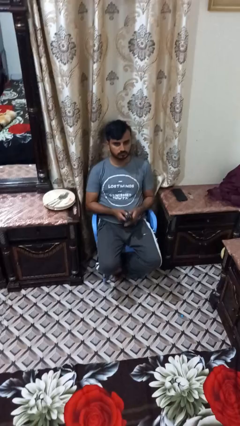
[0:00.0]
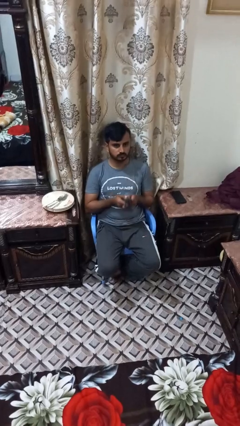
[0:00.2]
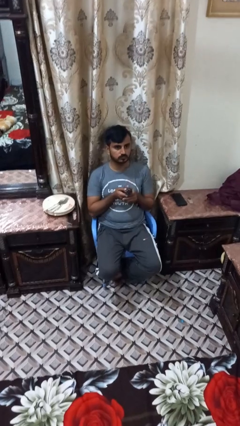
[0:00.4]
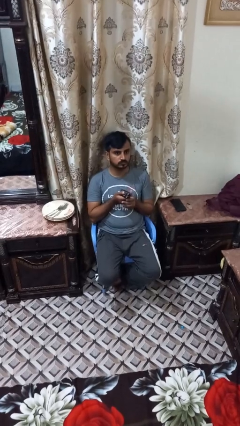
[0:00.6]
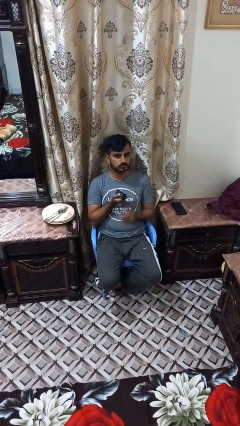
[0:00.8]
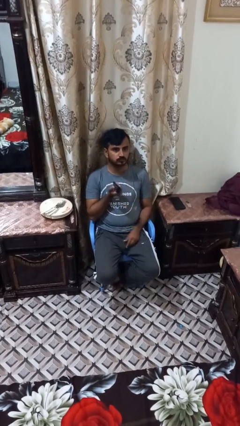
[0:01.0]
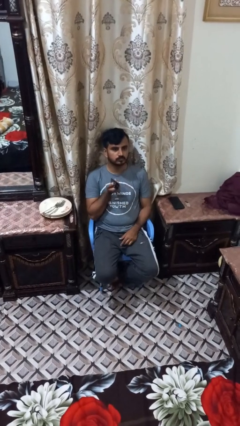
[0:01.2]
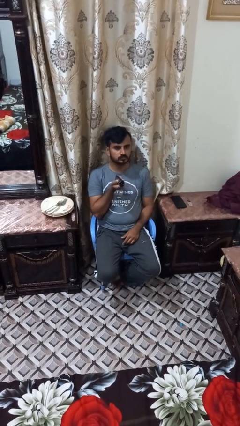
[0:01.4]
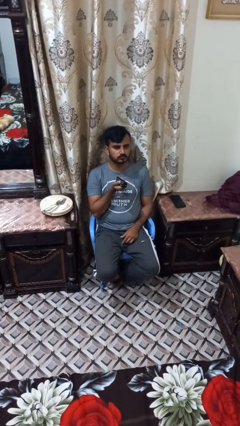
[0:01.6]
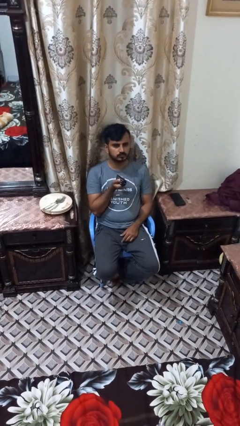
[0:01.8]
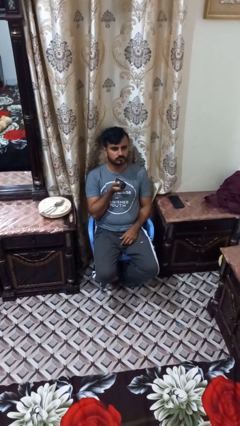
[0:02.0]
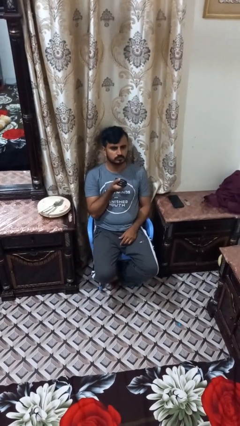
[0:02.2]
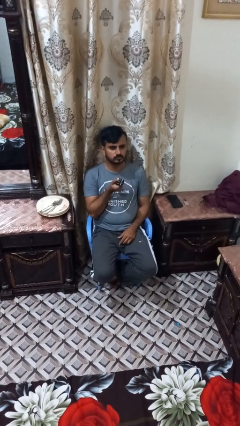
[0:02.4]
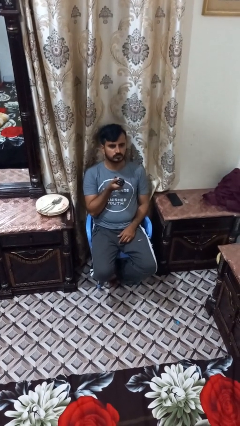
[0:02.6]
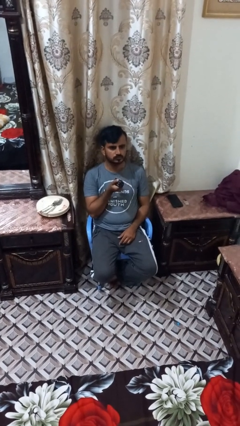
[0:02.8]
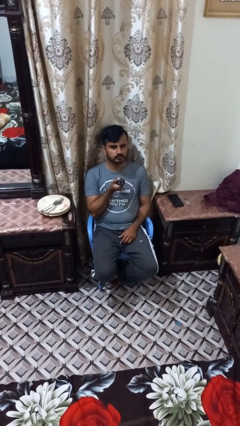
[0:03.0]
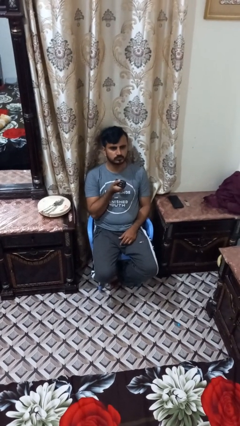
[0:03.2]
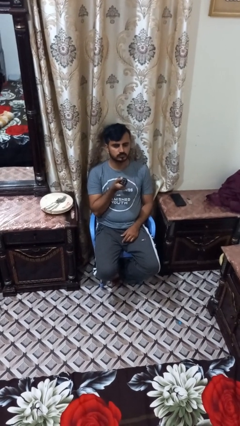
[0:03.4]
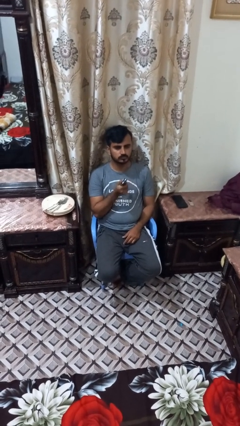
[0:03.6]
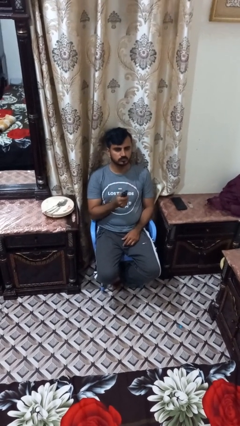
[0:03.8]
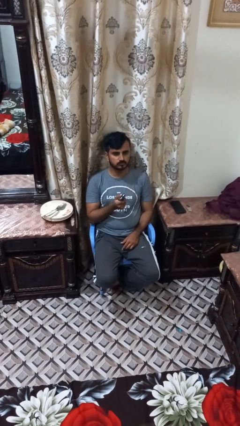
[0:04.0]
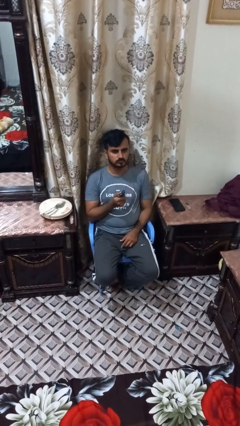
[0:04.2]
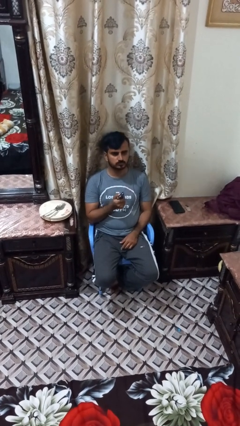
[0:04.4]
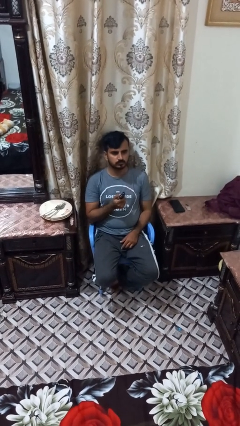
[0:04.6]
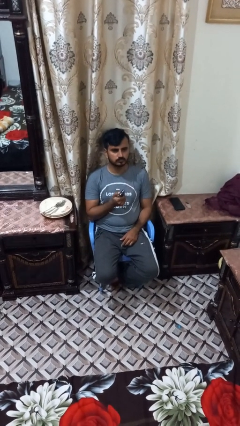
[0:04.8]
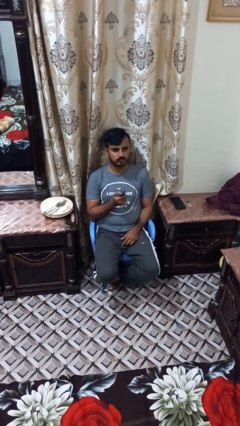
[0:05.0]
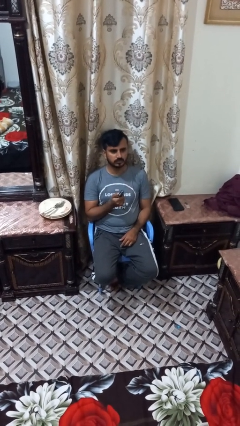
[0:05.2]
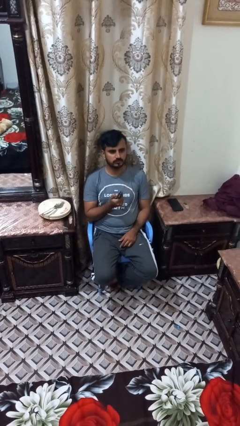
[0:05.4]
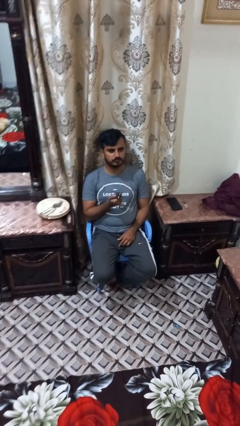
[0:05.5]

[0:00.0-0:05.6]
person uses television remote

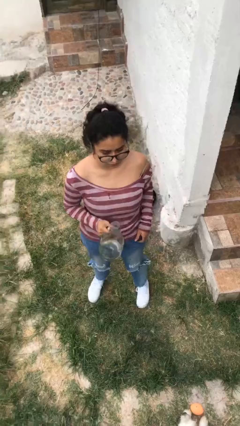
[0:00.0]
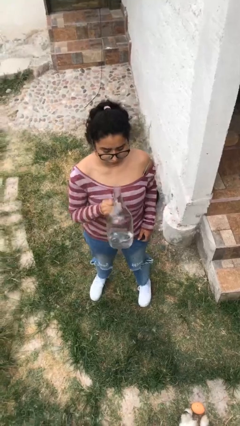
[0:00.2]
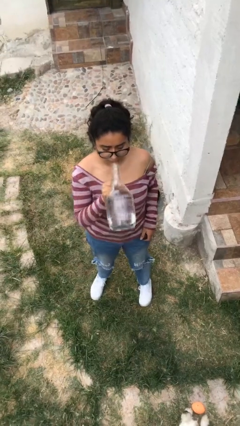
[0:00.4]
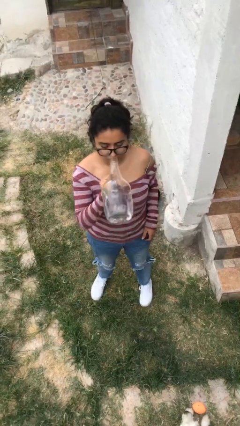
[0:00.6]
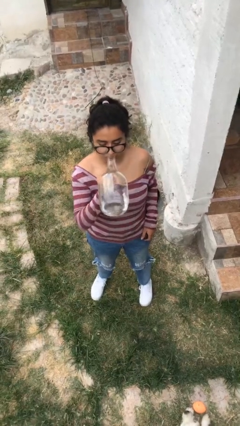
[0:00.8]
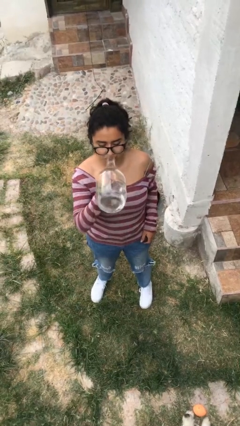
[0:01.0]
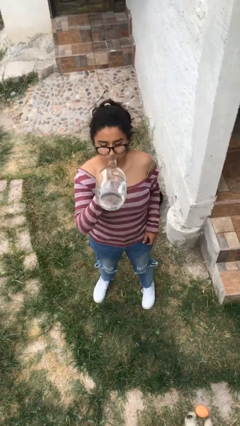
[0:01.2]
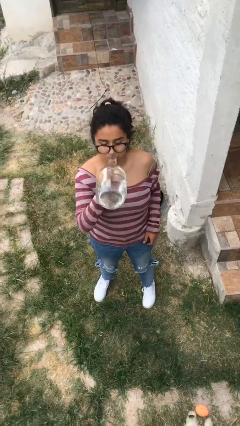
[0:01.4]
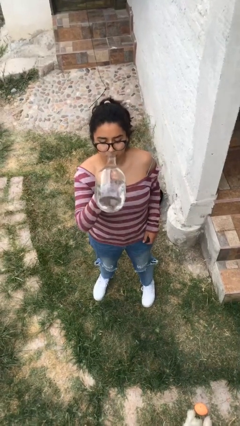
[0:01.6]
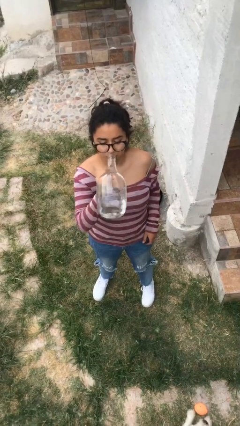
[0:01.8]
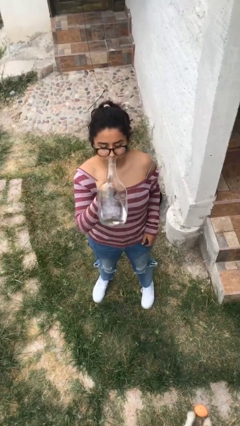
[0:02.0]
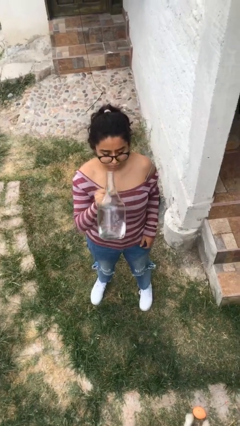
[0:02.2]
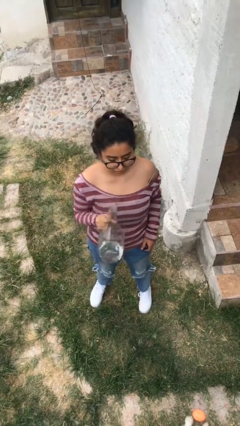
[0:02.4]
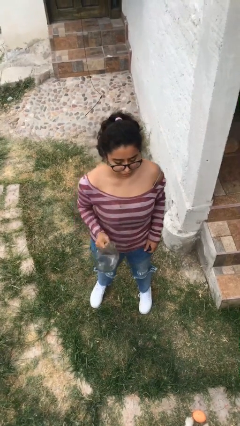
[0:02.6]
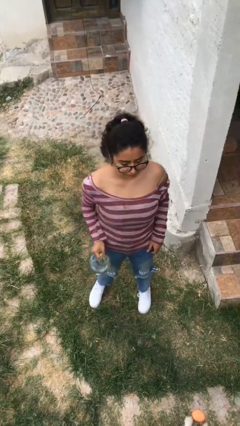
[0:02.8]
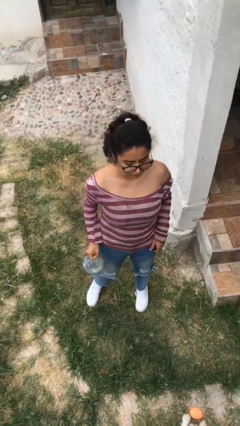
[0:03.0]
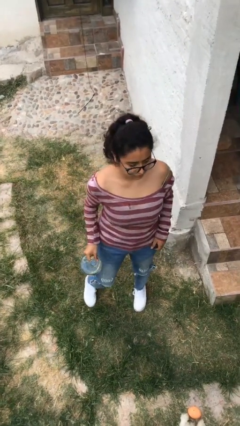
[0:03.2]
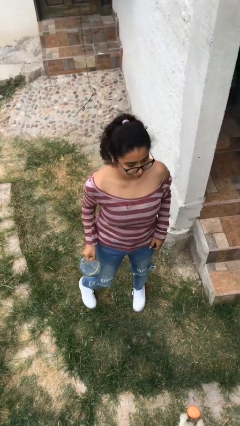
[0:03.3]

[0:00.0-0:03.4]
person drinks from bottle

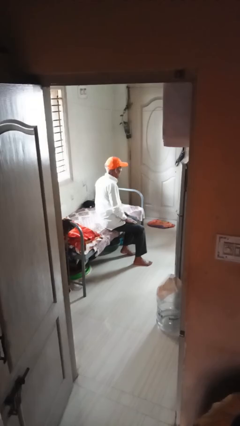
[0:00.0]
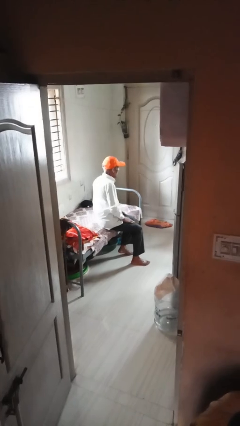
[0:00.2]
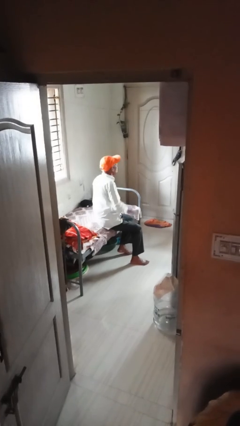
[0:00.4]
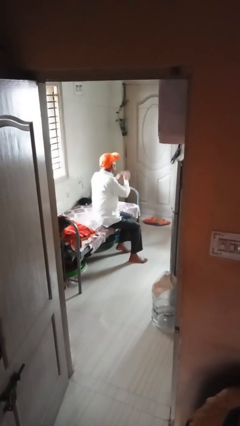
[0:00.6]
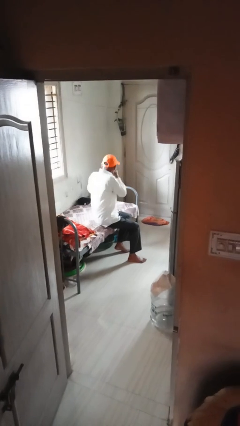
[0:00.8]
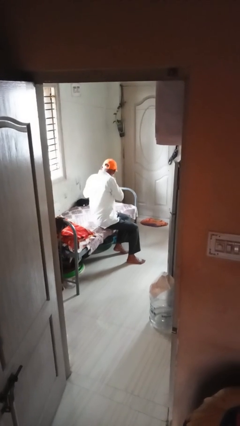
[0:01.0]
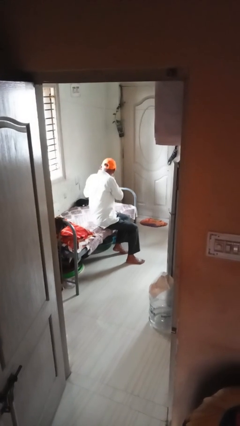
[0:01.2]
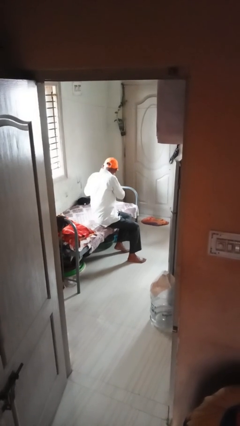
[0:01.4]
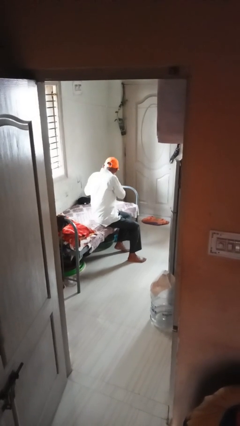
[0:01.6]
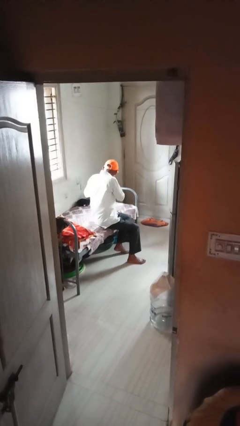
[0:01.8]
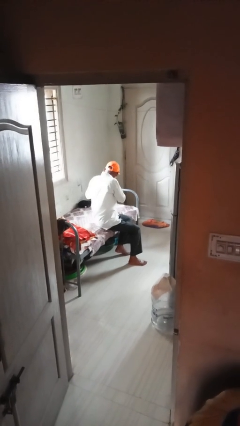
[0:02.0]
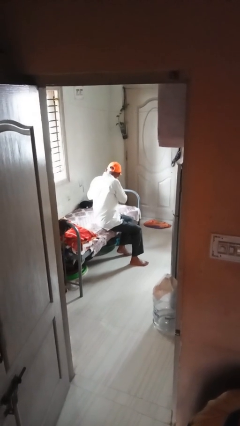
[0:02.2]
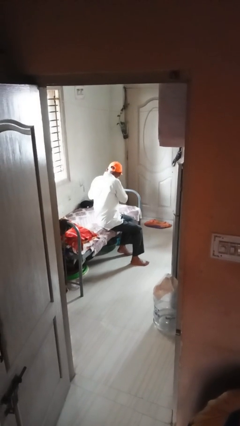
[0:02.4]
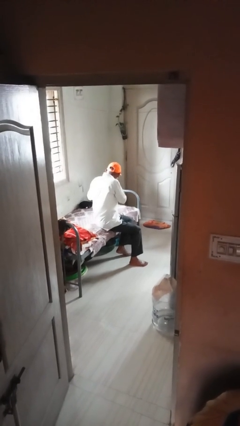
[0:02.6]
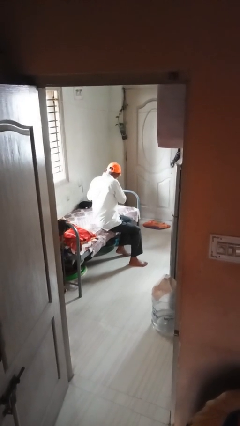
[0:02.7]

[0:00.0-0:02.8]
person sneezes into hand

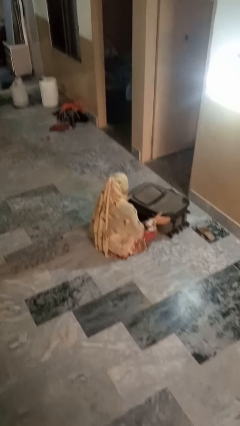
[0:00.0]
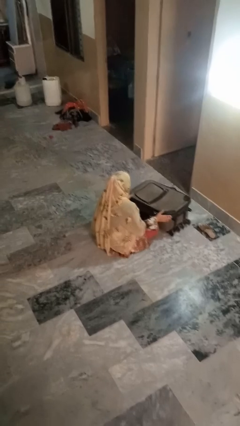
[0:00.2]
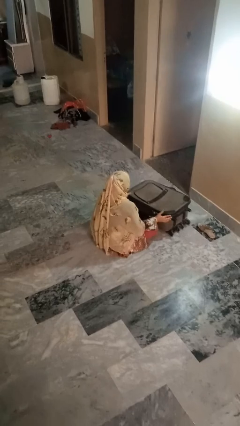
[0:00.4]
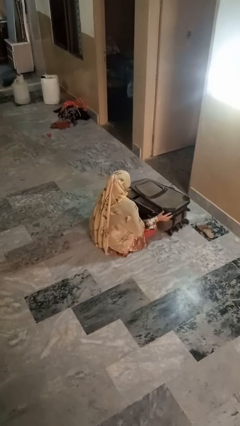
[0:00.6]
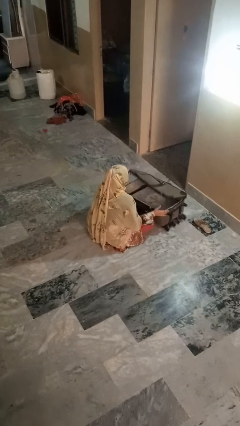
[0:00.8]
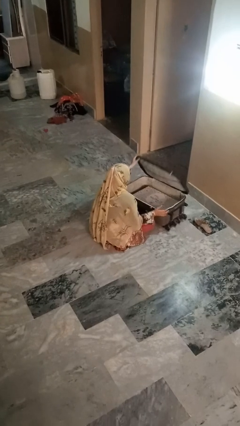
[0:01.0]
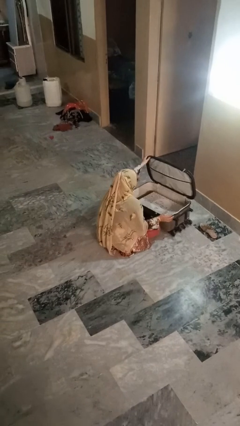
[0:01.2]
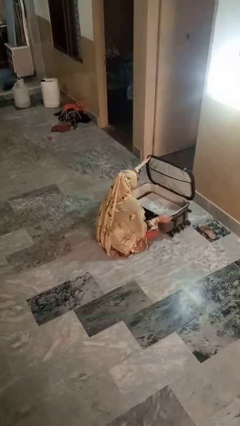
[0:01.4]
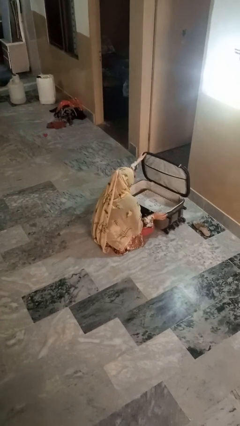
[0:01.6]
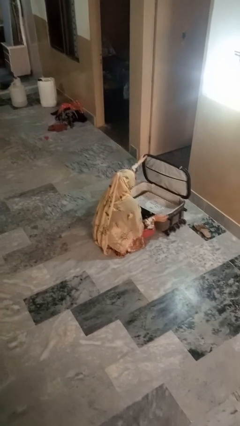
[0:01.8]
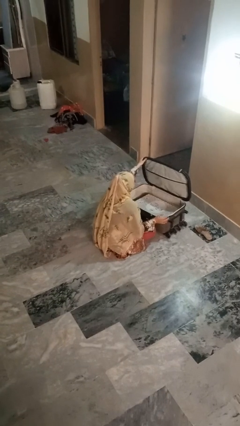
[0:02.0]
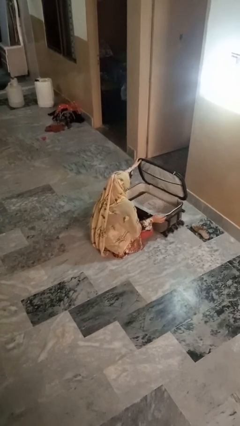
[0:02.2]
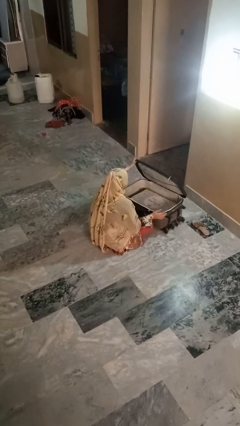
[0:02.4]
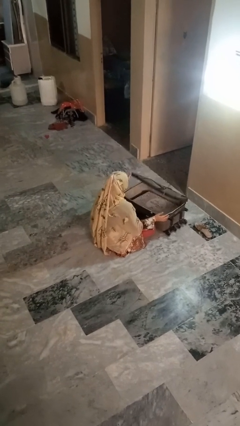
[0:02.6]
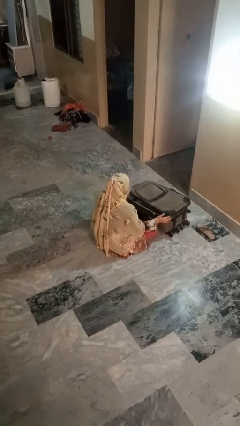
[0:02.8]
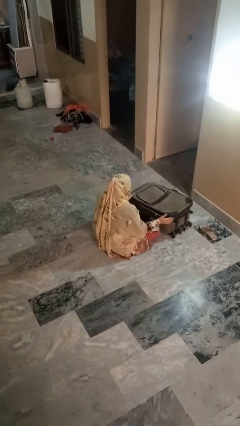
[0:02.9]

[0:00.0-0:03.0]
person opens suitcase

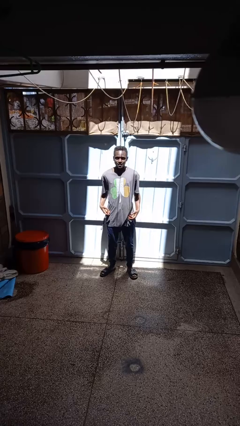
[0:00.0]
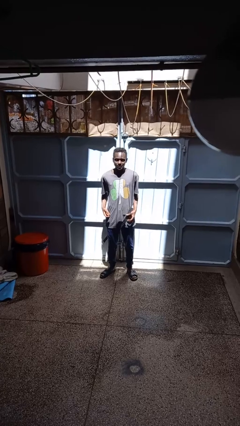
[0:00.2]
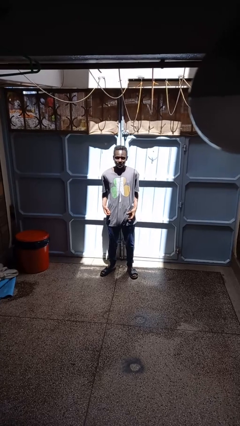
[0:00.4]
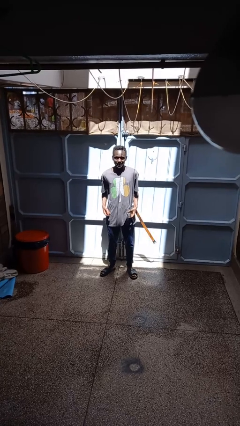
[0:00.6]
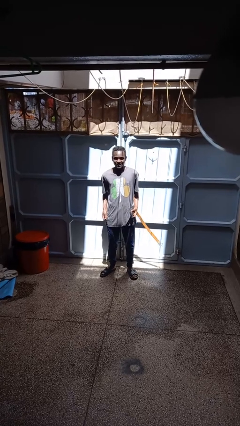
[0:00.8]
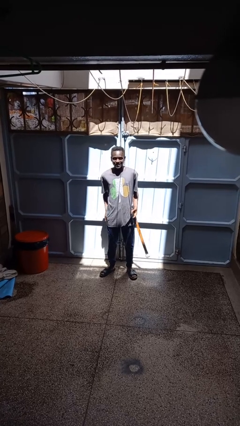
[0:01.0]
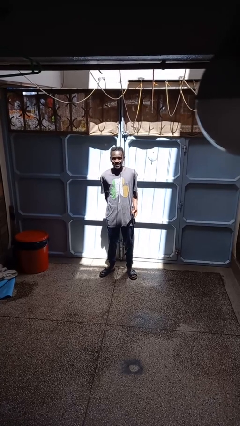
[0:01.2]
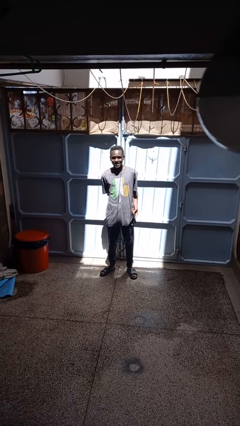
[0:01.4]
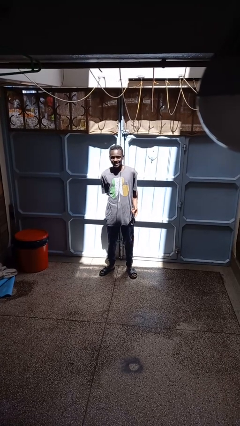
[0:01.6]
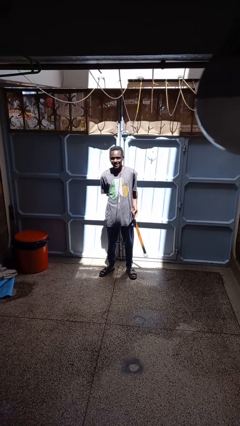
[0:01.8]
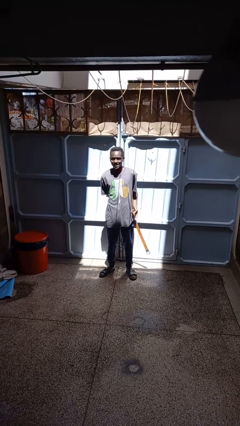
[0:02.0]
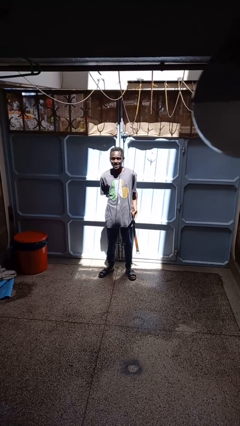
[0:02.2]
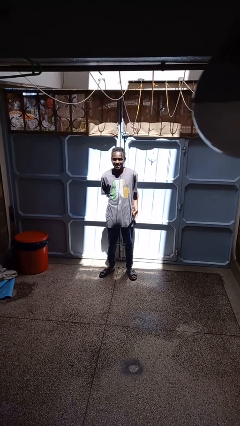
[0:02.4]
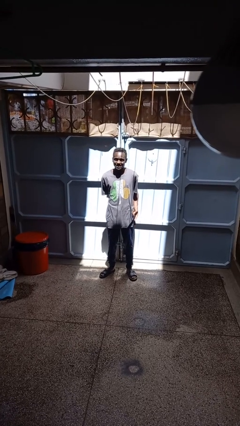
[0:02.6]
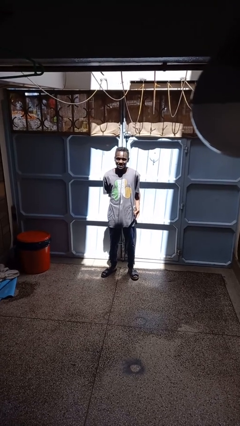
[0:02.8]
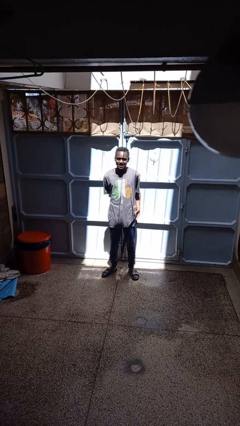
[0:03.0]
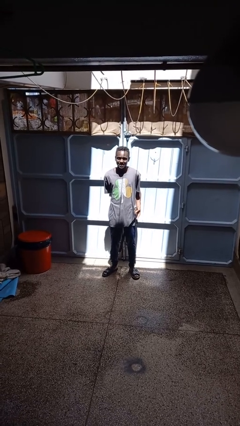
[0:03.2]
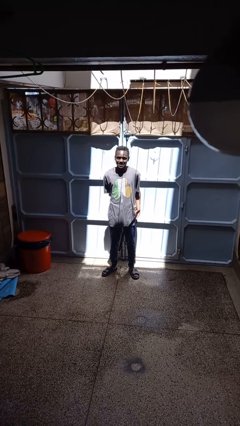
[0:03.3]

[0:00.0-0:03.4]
person takes off belt
